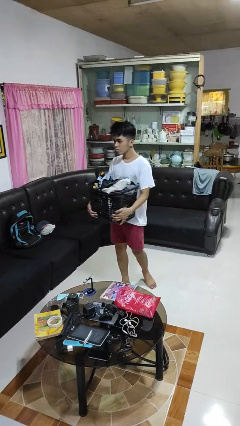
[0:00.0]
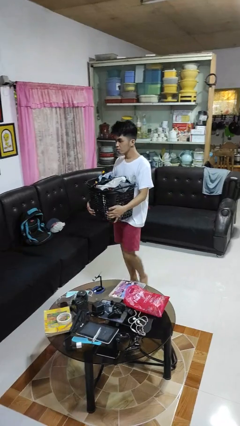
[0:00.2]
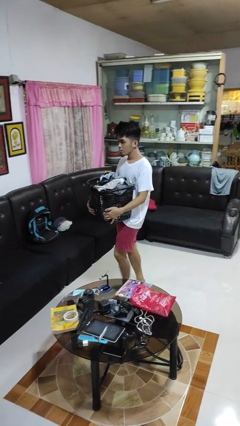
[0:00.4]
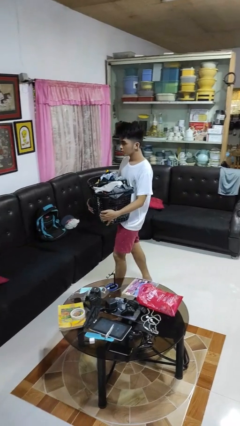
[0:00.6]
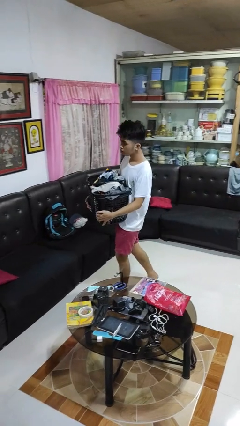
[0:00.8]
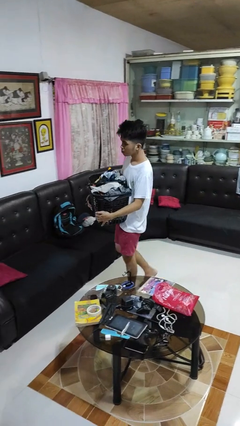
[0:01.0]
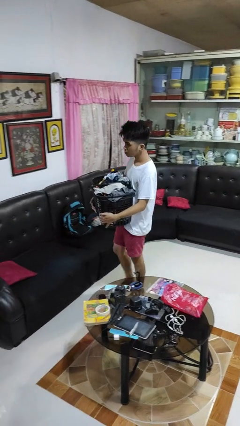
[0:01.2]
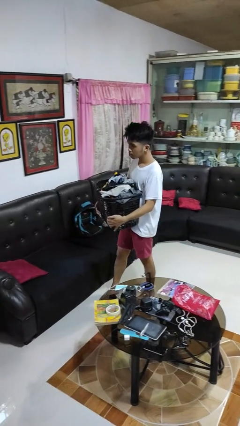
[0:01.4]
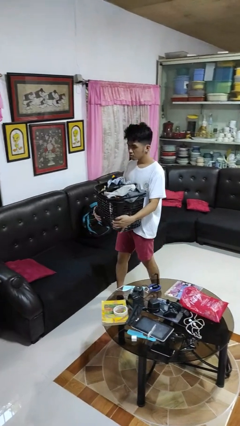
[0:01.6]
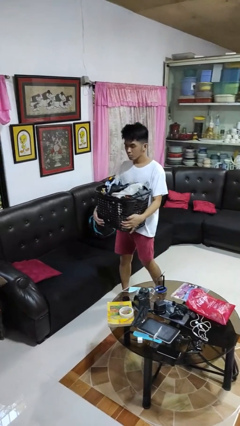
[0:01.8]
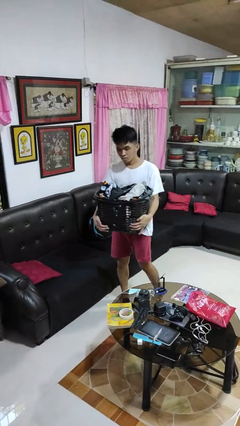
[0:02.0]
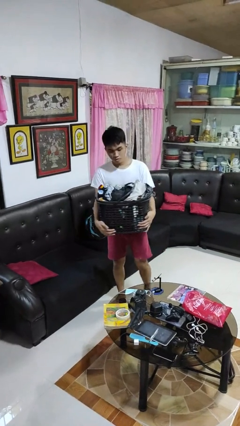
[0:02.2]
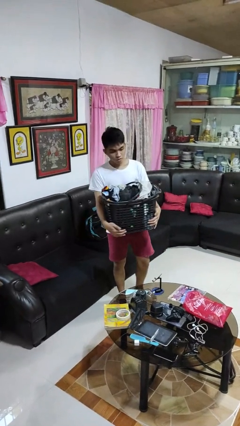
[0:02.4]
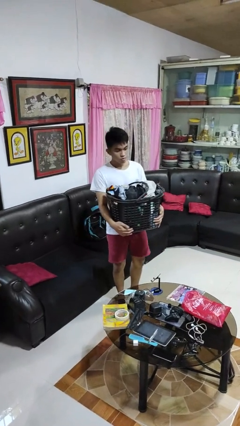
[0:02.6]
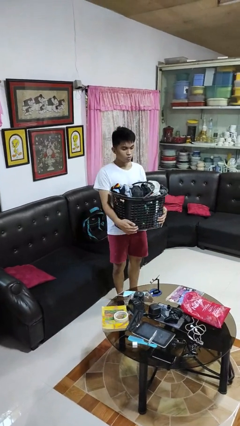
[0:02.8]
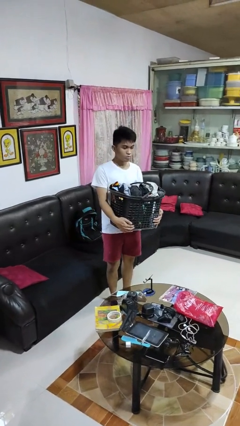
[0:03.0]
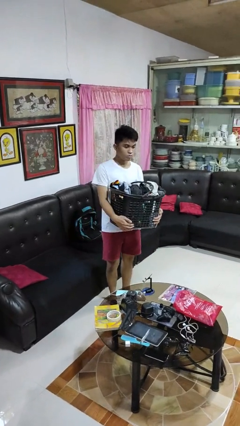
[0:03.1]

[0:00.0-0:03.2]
person carries laundry basket

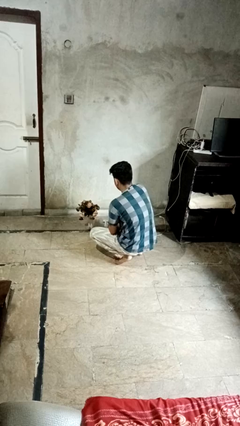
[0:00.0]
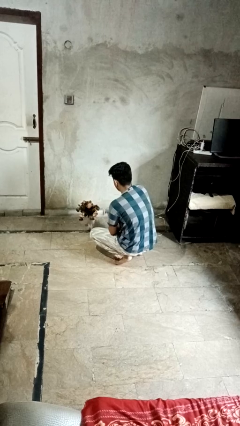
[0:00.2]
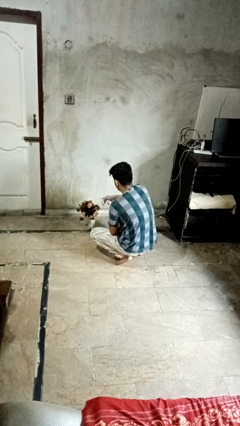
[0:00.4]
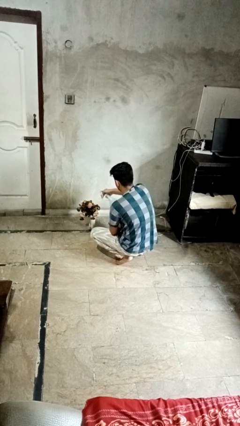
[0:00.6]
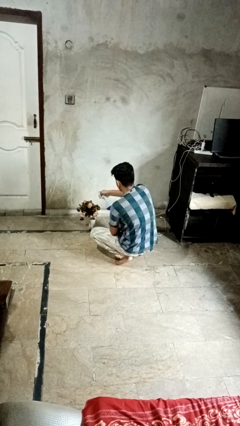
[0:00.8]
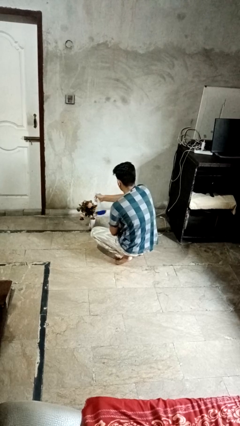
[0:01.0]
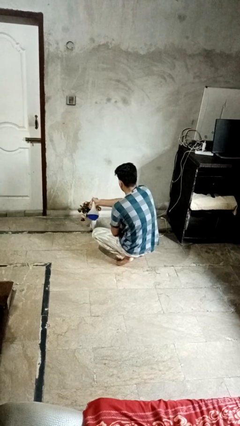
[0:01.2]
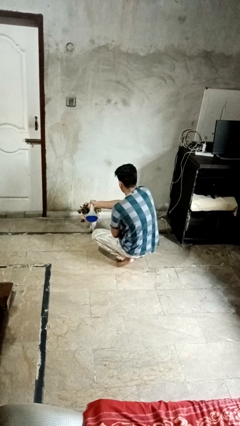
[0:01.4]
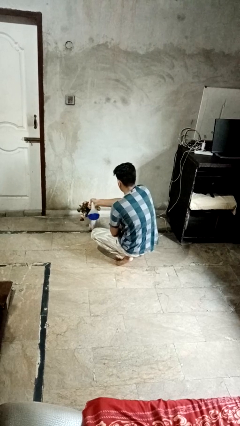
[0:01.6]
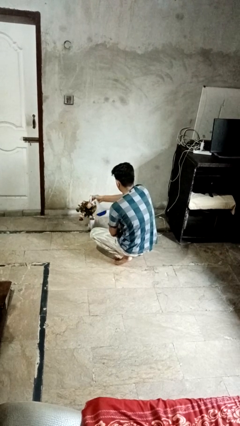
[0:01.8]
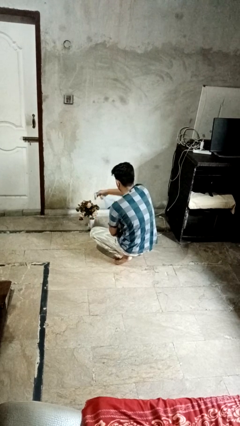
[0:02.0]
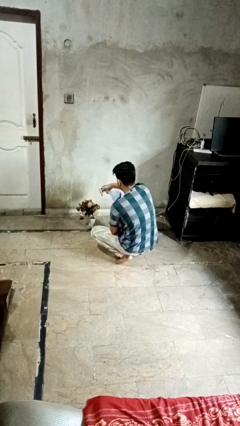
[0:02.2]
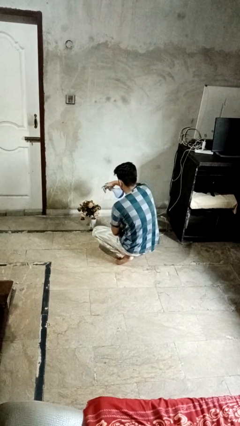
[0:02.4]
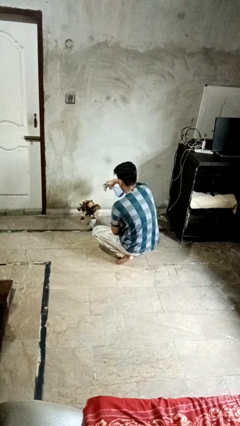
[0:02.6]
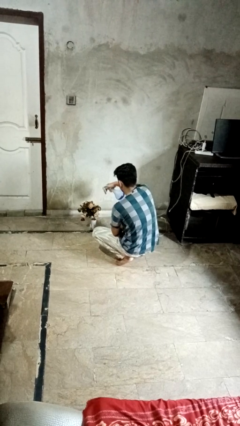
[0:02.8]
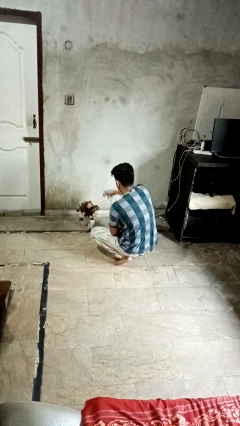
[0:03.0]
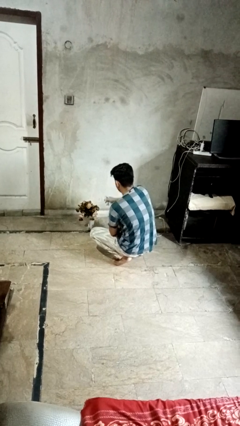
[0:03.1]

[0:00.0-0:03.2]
person waters houseplant

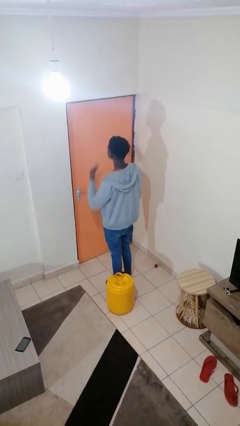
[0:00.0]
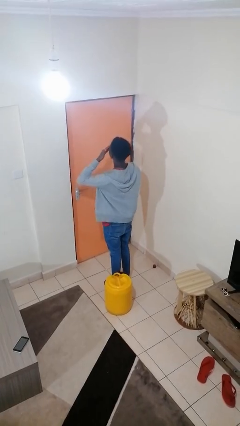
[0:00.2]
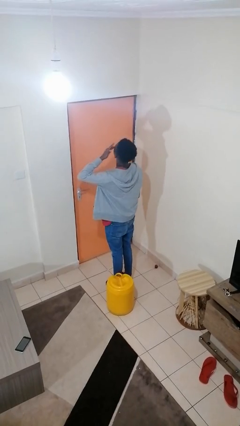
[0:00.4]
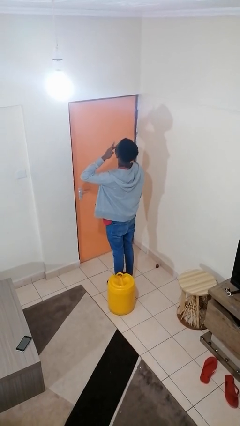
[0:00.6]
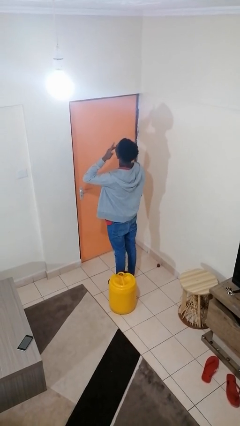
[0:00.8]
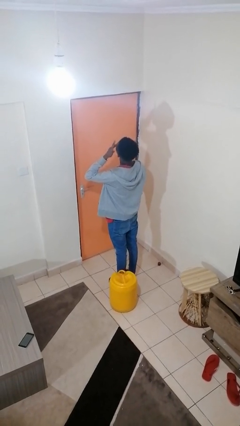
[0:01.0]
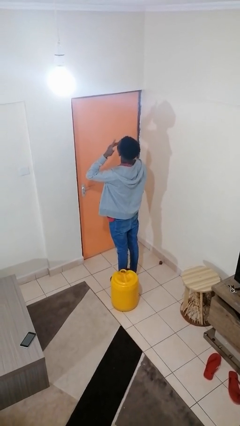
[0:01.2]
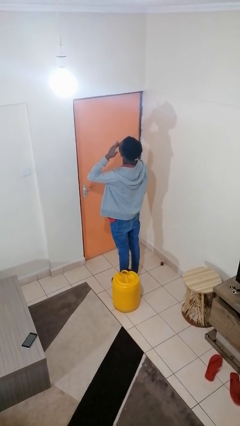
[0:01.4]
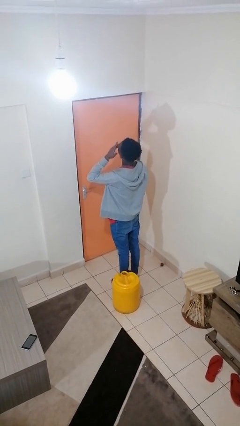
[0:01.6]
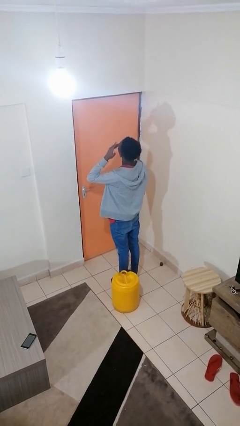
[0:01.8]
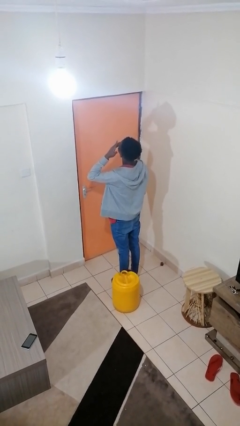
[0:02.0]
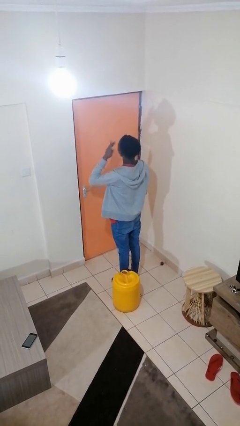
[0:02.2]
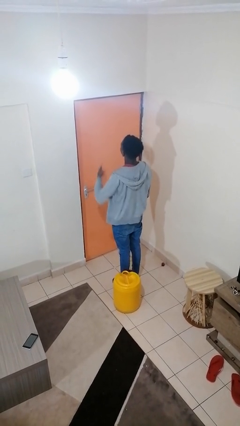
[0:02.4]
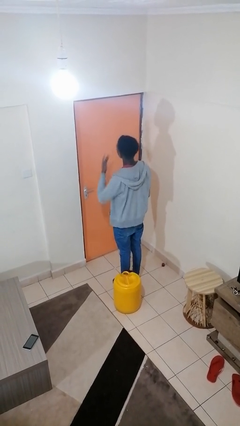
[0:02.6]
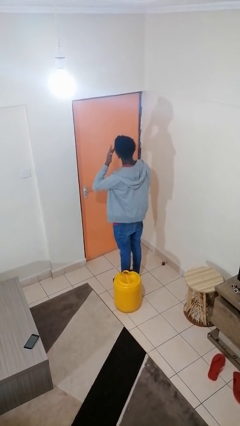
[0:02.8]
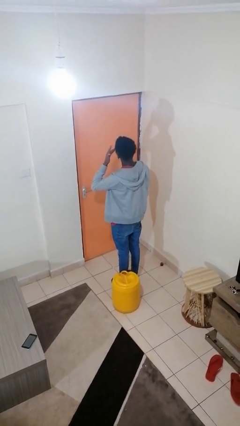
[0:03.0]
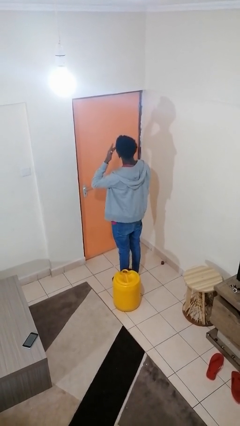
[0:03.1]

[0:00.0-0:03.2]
person rubs eyes

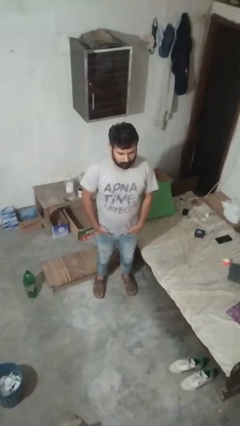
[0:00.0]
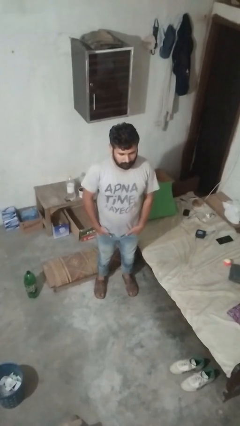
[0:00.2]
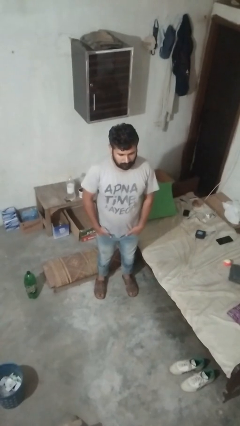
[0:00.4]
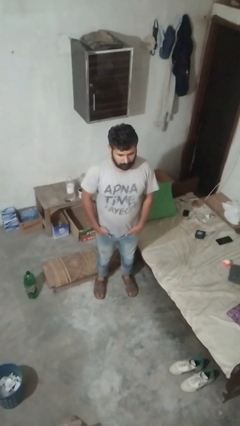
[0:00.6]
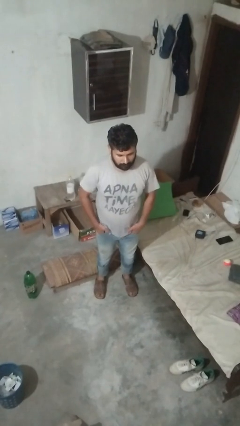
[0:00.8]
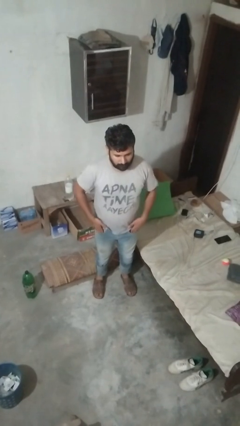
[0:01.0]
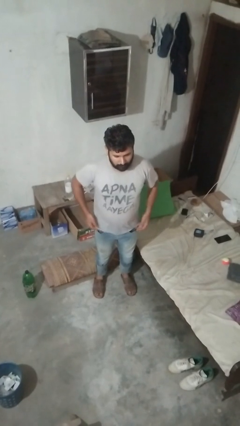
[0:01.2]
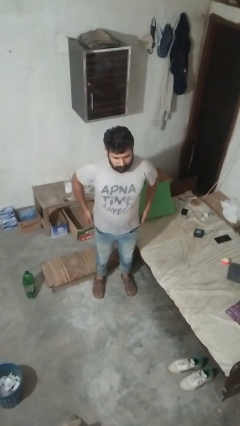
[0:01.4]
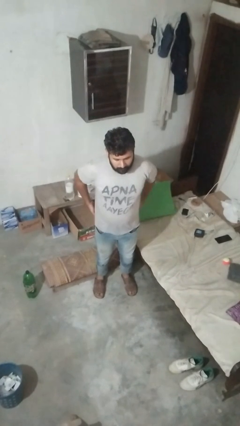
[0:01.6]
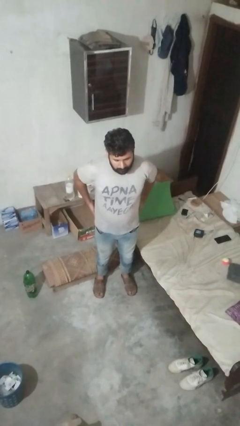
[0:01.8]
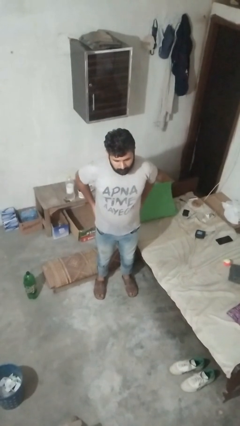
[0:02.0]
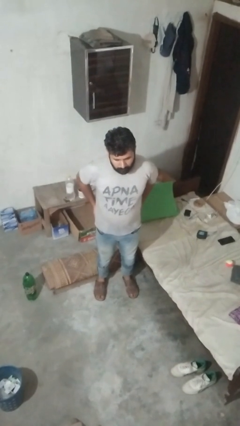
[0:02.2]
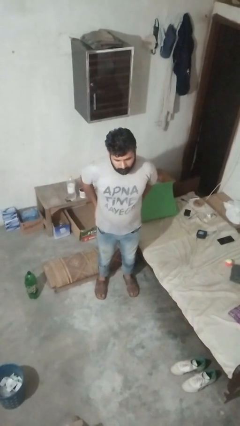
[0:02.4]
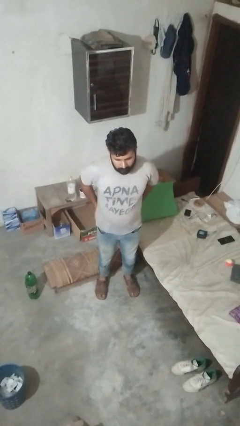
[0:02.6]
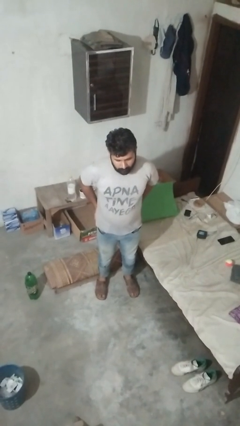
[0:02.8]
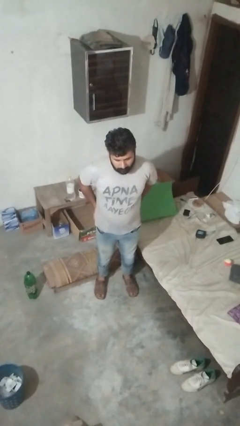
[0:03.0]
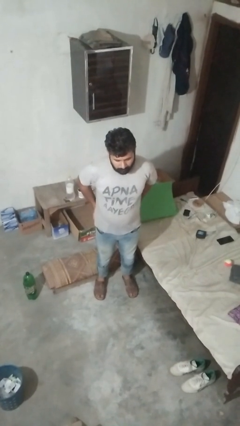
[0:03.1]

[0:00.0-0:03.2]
person puts hands in back pockets

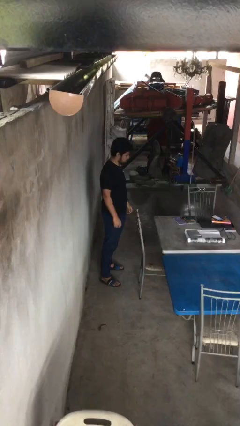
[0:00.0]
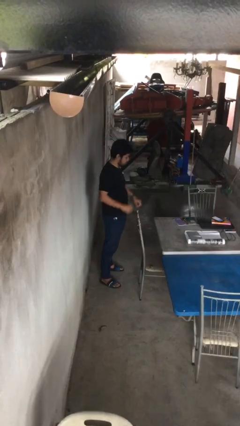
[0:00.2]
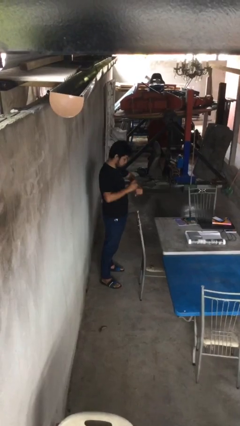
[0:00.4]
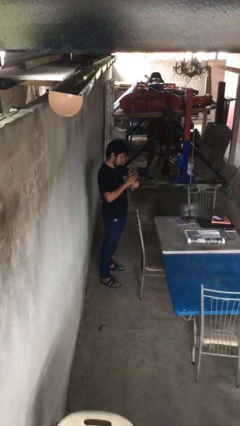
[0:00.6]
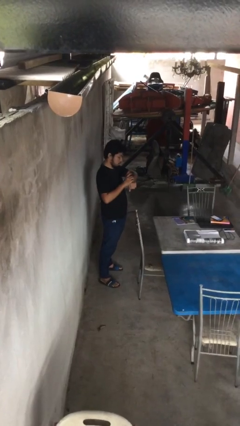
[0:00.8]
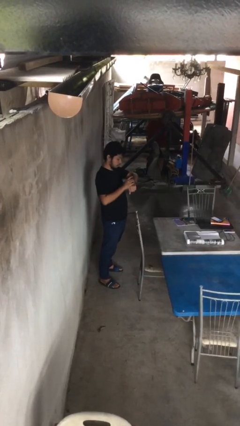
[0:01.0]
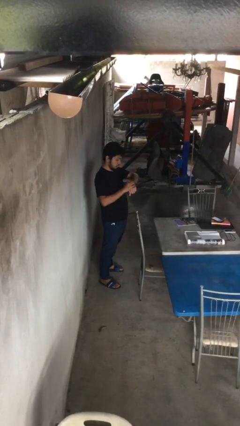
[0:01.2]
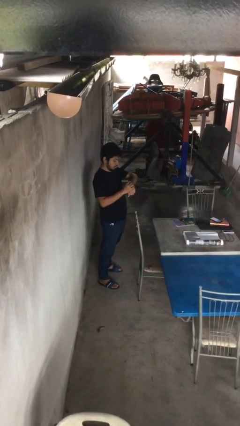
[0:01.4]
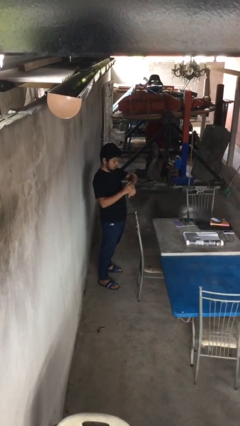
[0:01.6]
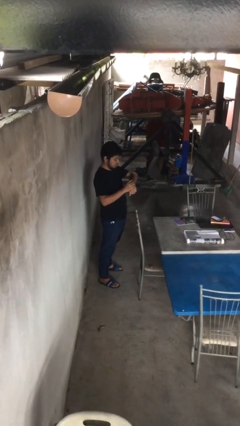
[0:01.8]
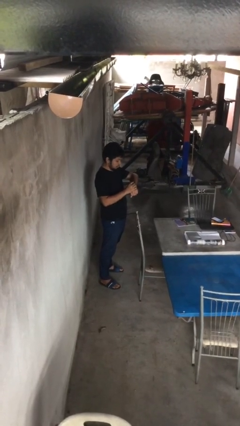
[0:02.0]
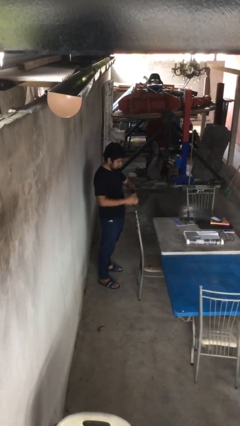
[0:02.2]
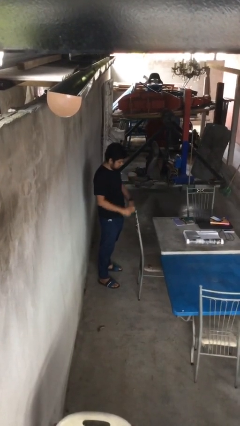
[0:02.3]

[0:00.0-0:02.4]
person looks at wristwatch

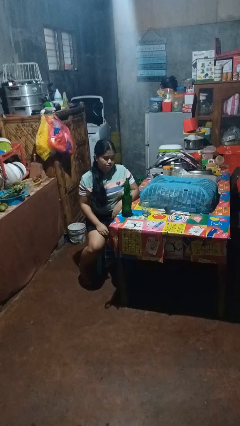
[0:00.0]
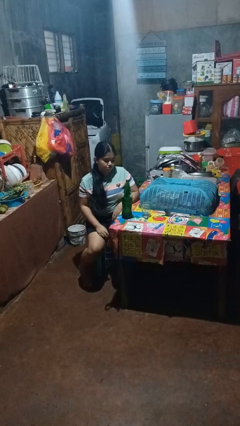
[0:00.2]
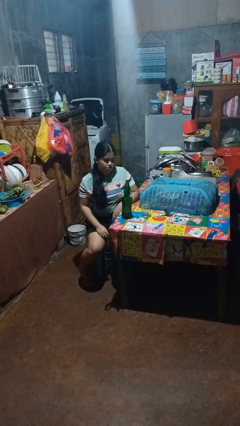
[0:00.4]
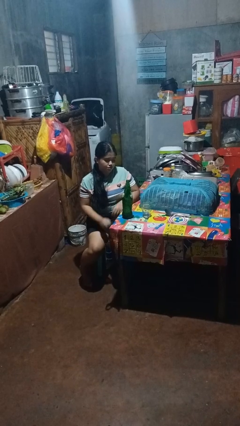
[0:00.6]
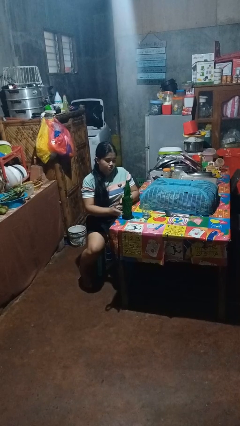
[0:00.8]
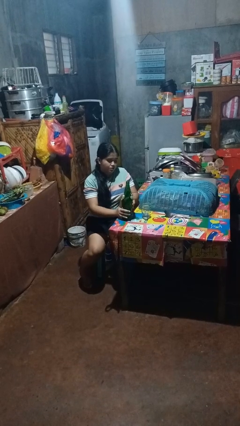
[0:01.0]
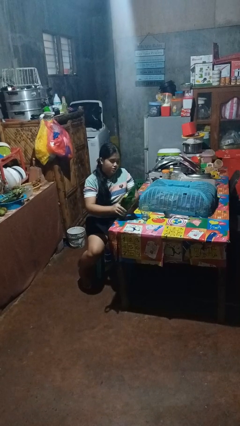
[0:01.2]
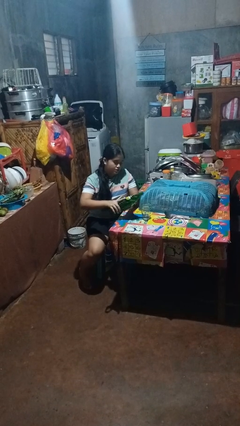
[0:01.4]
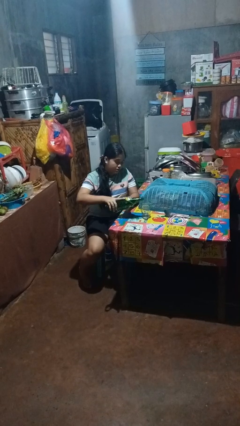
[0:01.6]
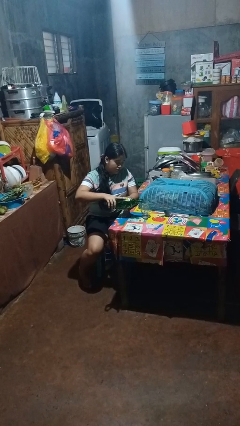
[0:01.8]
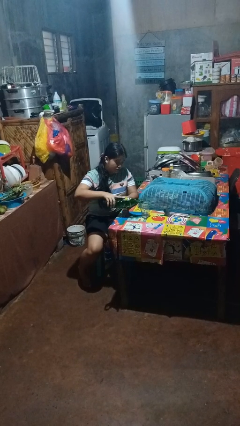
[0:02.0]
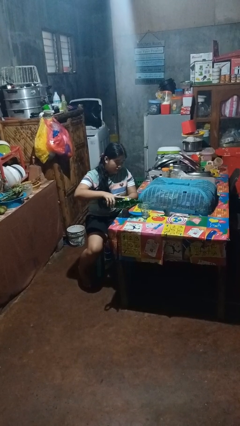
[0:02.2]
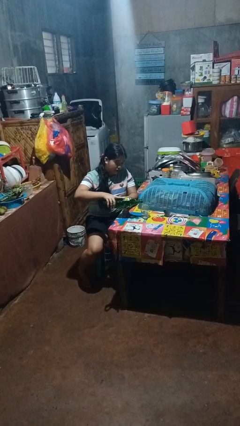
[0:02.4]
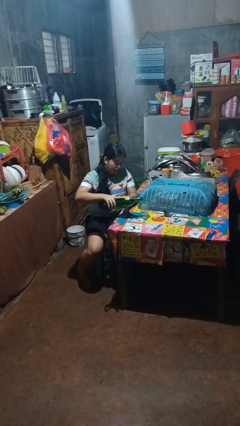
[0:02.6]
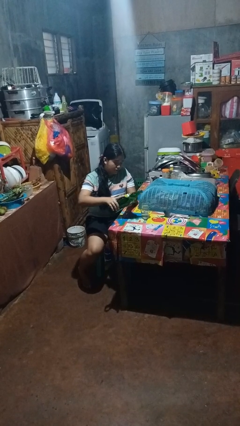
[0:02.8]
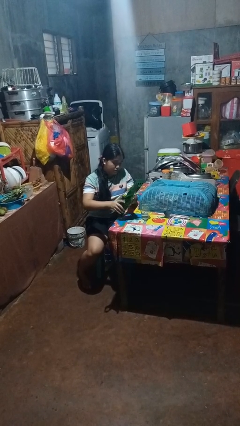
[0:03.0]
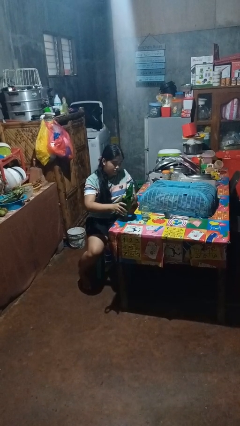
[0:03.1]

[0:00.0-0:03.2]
person pours liquid into cup
